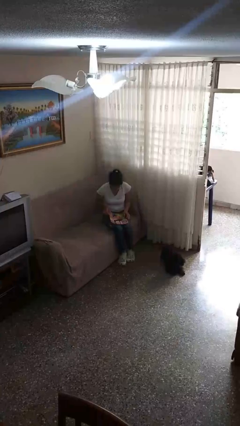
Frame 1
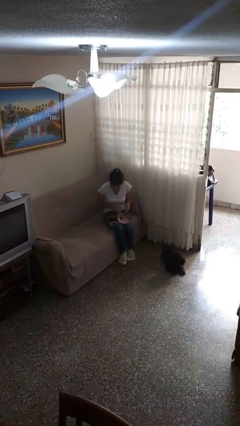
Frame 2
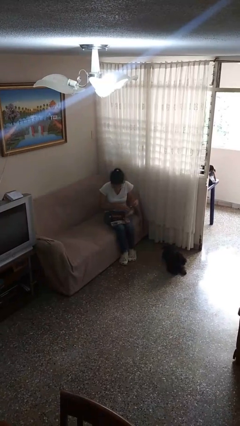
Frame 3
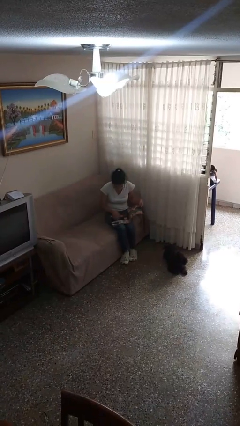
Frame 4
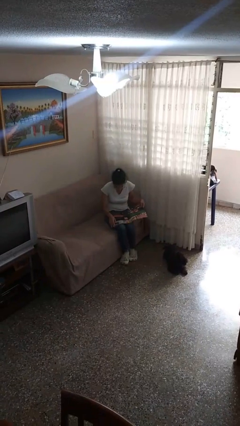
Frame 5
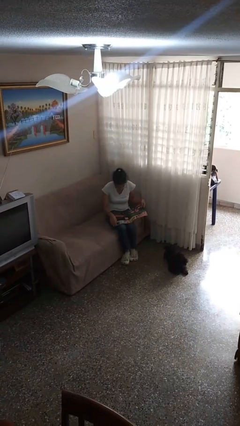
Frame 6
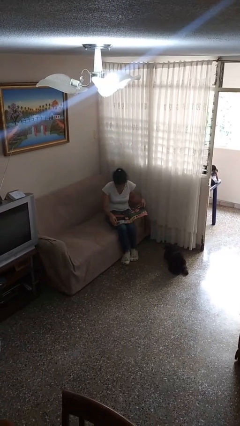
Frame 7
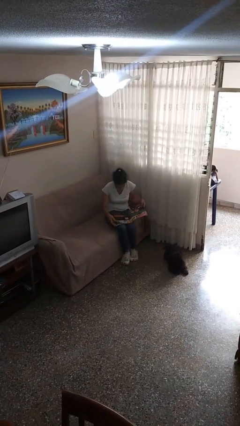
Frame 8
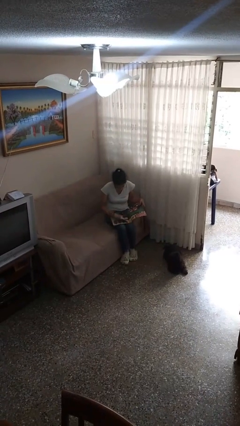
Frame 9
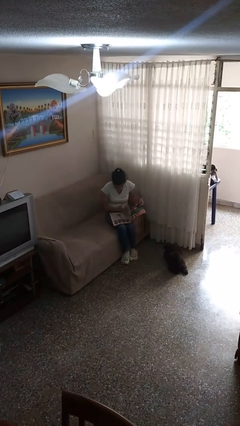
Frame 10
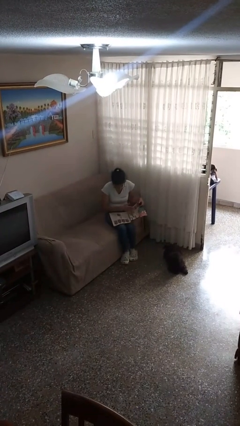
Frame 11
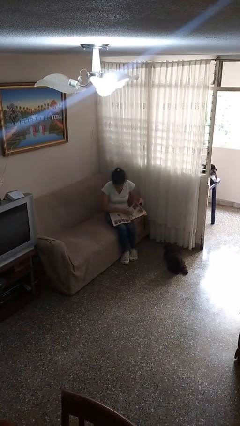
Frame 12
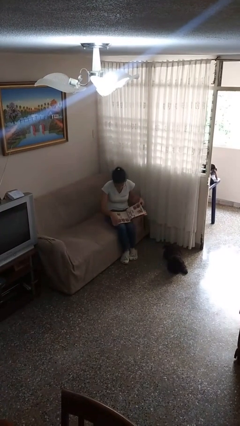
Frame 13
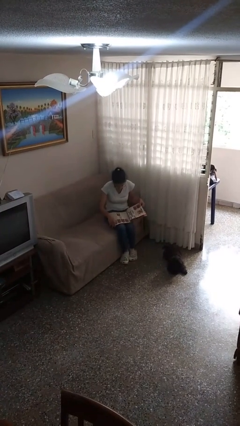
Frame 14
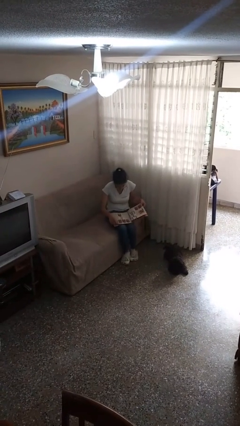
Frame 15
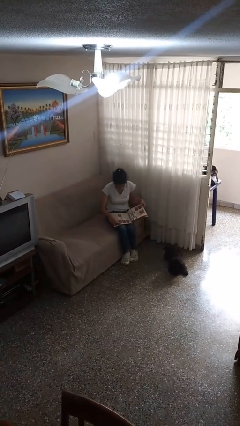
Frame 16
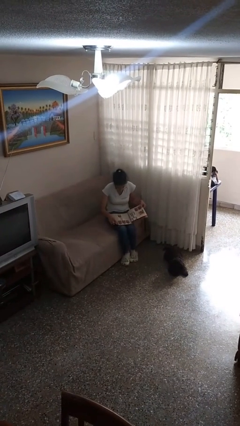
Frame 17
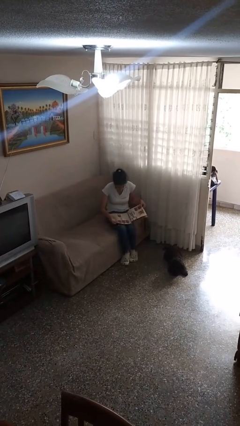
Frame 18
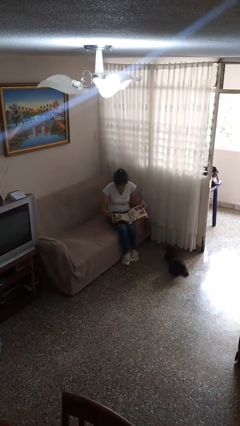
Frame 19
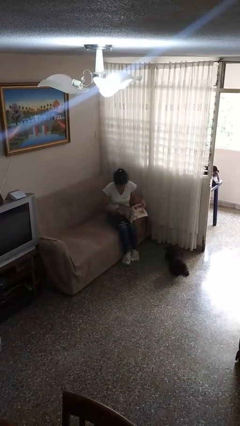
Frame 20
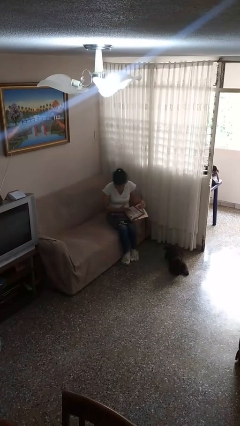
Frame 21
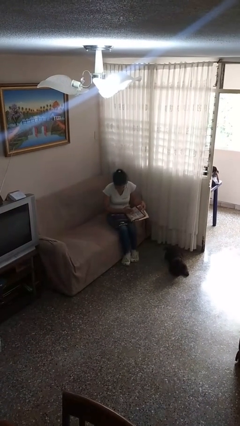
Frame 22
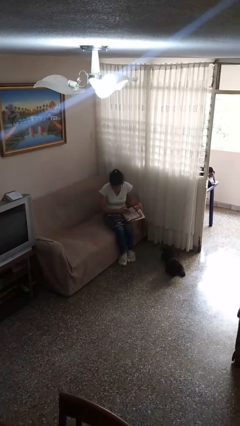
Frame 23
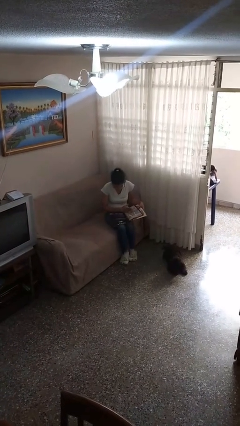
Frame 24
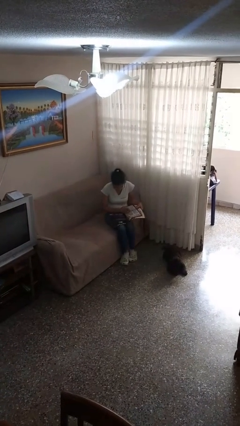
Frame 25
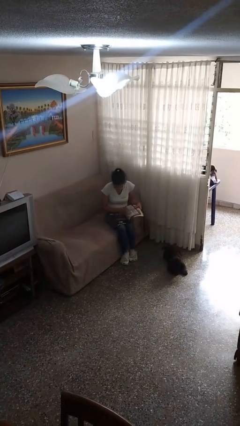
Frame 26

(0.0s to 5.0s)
person reads magazine

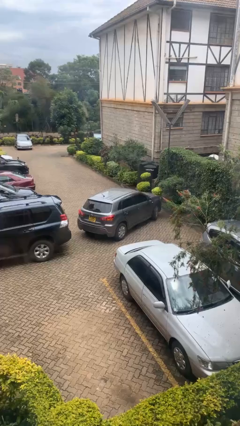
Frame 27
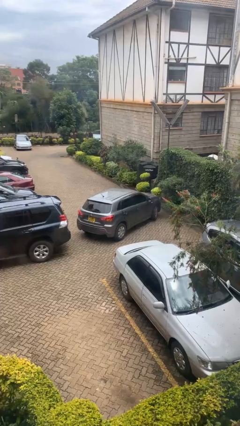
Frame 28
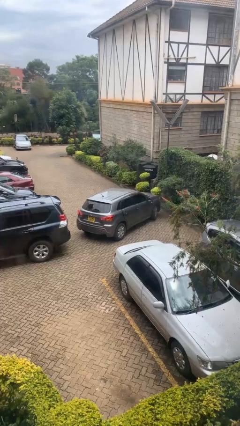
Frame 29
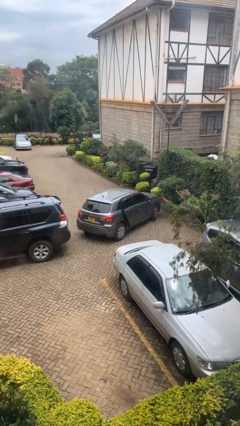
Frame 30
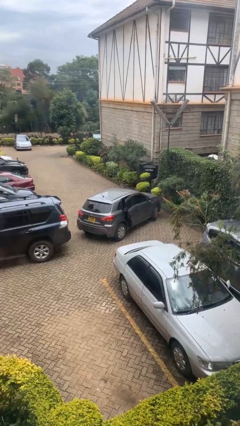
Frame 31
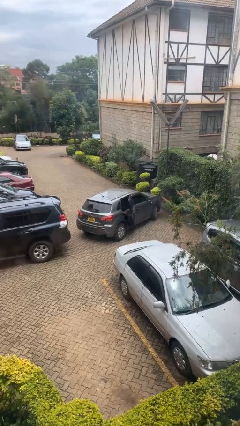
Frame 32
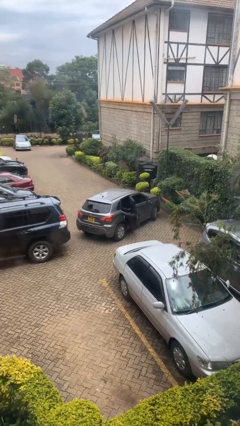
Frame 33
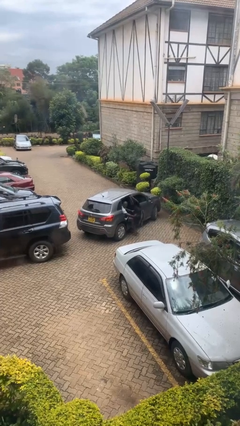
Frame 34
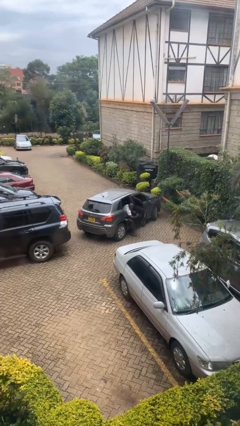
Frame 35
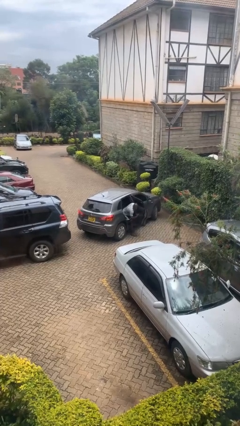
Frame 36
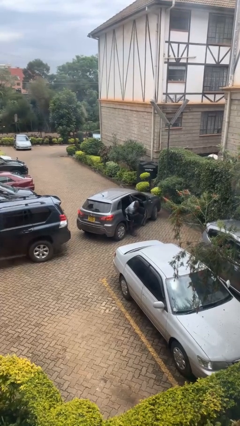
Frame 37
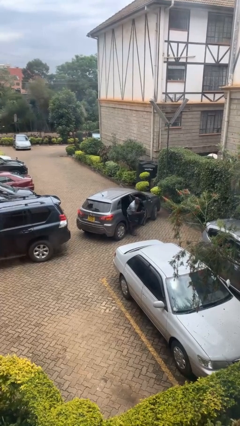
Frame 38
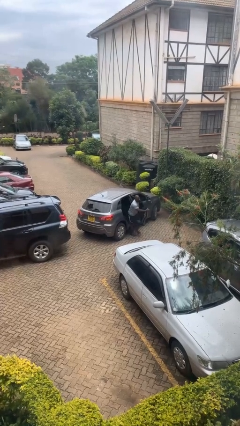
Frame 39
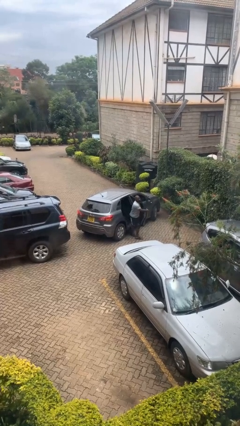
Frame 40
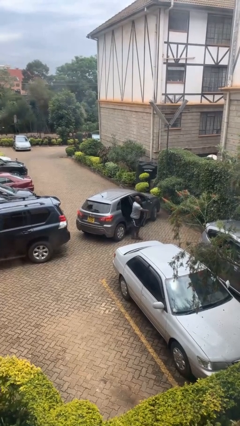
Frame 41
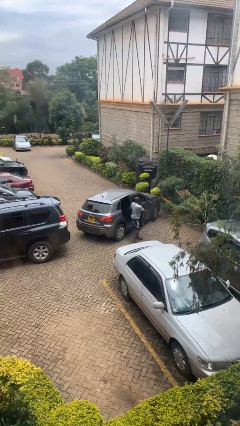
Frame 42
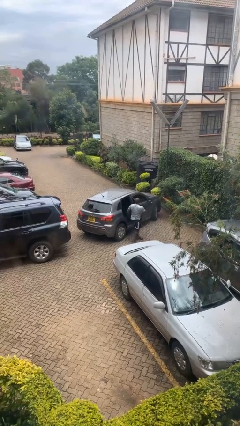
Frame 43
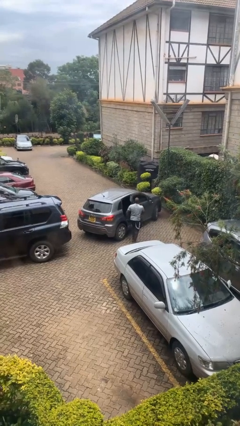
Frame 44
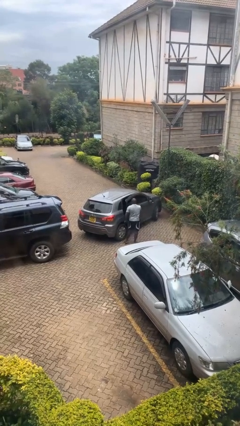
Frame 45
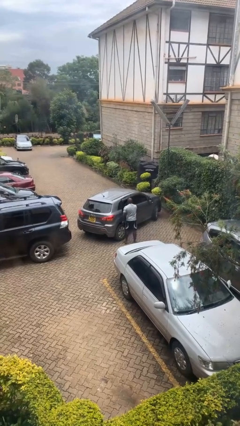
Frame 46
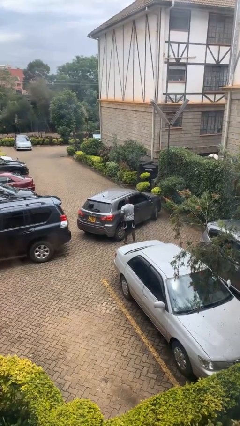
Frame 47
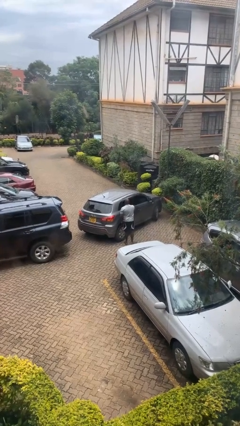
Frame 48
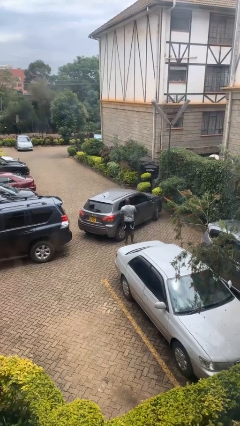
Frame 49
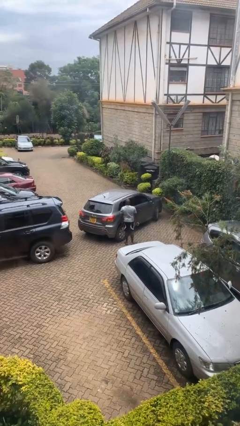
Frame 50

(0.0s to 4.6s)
car drops off person

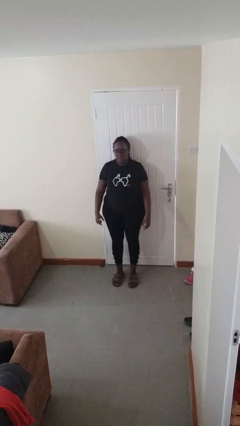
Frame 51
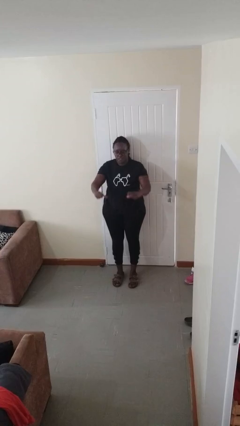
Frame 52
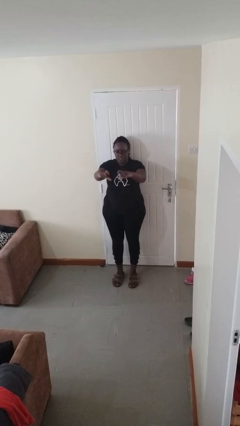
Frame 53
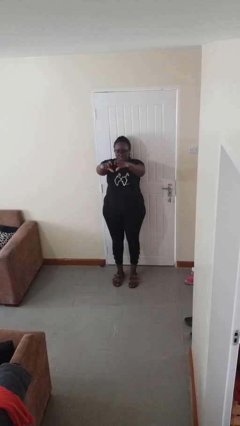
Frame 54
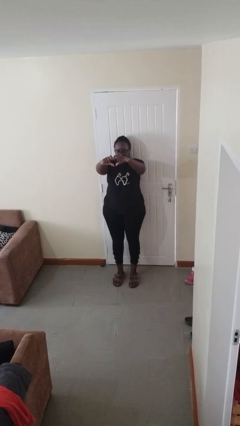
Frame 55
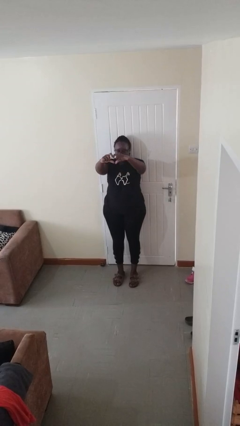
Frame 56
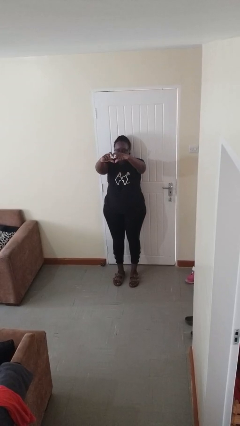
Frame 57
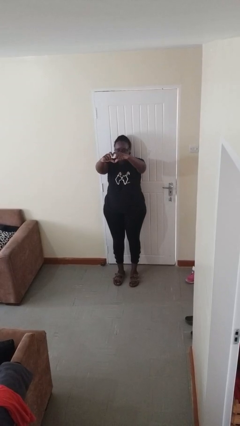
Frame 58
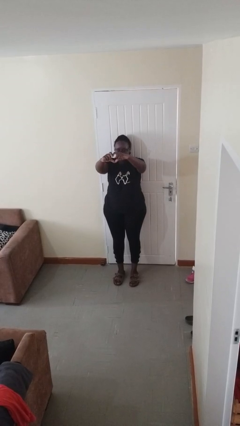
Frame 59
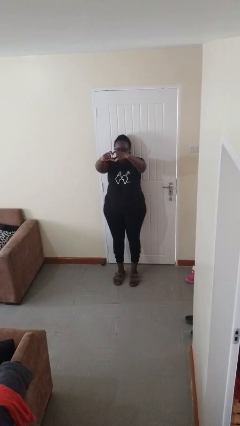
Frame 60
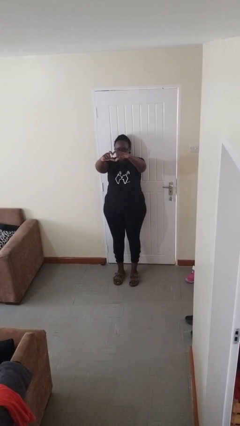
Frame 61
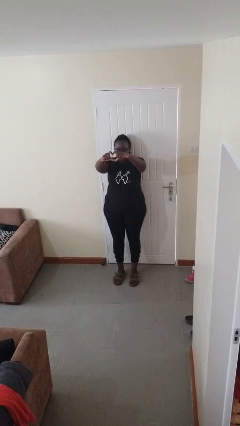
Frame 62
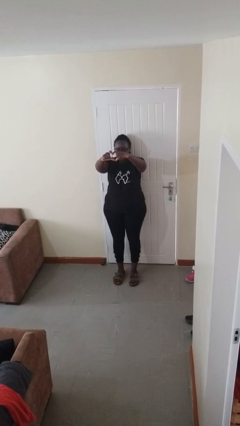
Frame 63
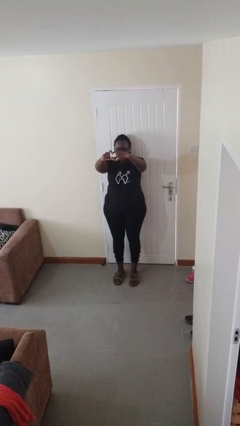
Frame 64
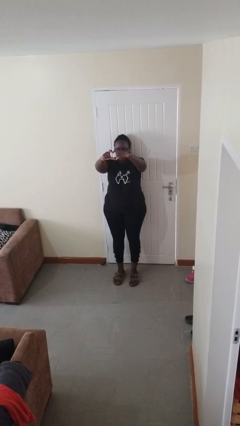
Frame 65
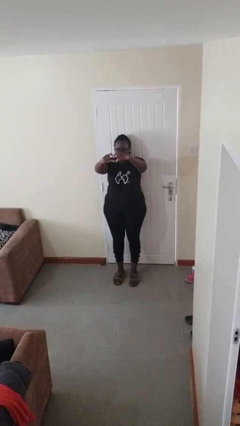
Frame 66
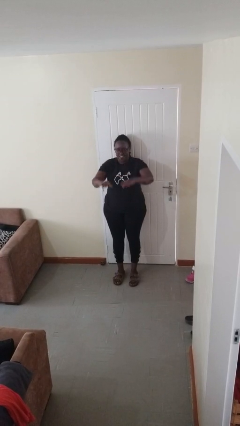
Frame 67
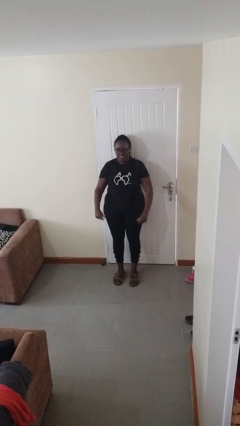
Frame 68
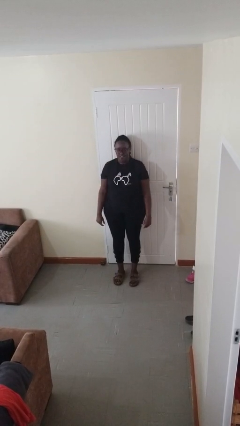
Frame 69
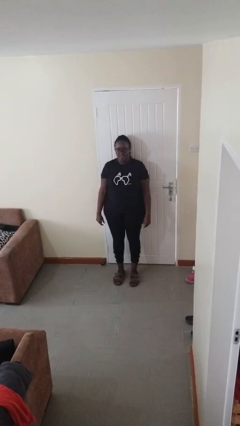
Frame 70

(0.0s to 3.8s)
person gestures heart

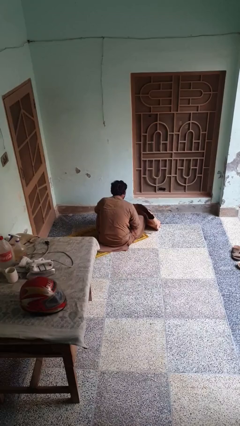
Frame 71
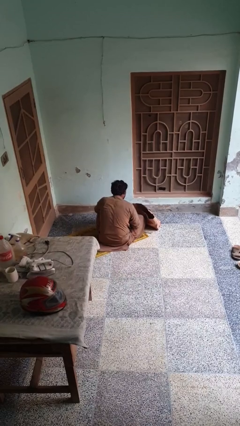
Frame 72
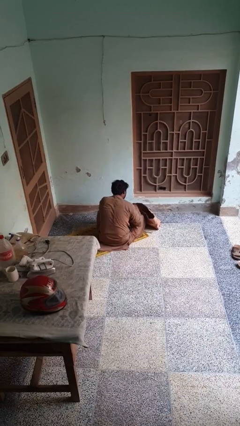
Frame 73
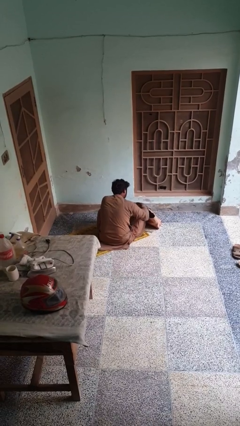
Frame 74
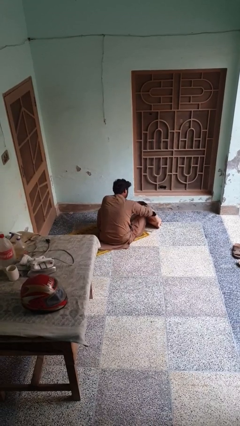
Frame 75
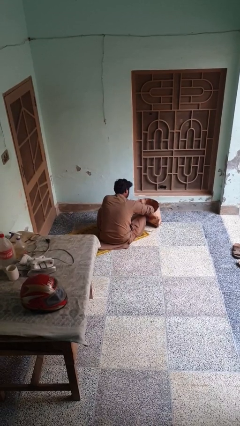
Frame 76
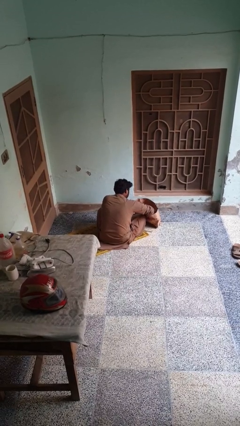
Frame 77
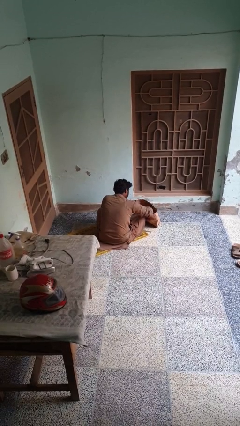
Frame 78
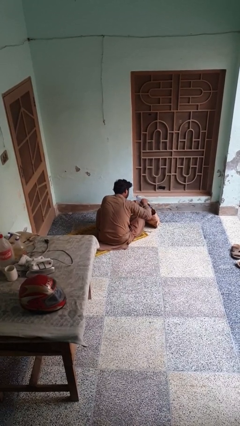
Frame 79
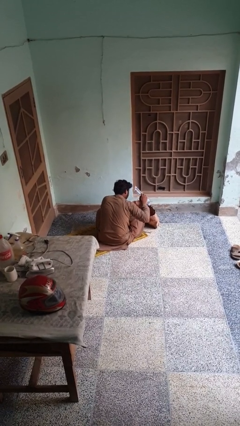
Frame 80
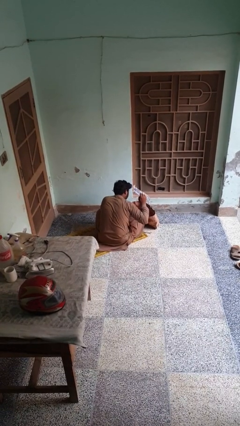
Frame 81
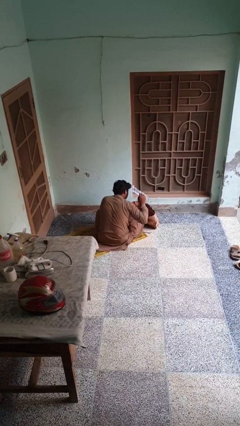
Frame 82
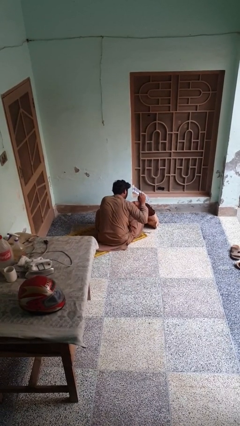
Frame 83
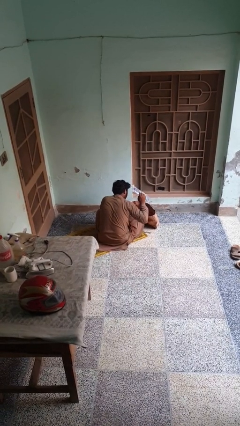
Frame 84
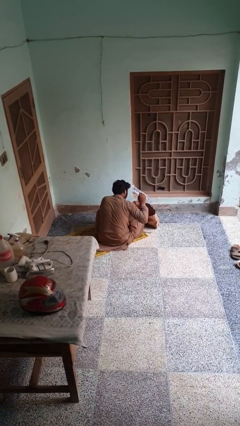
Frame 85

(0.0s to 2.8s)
person searches in bag

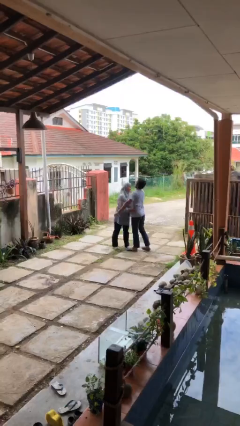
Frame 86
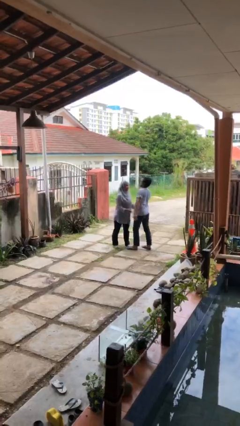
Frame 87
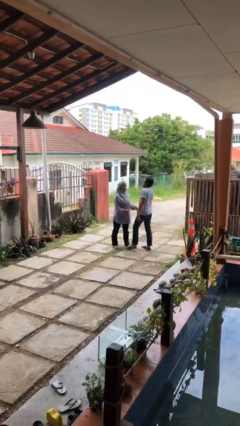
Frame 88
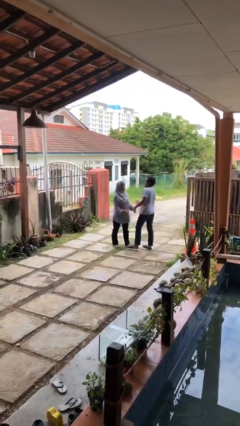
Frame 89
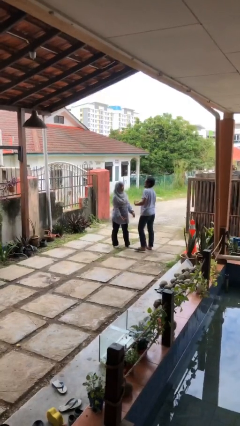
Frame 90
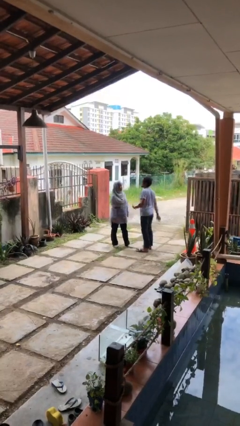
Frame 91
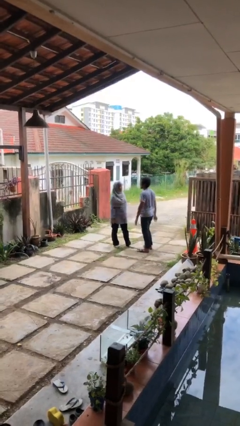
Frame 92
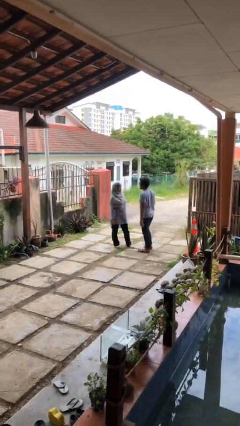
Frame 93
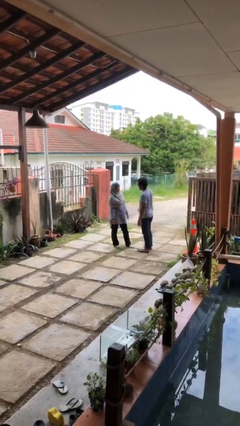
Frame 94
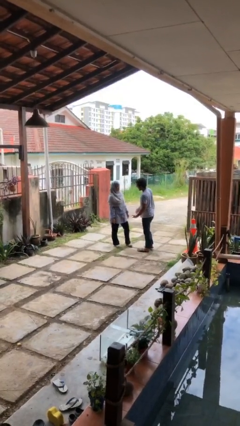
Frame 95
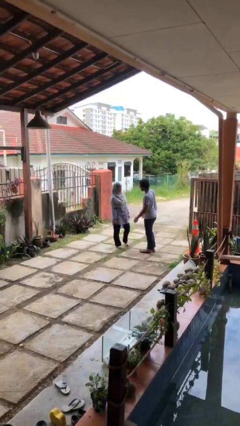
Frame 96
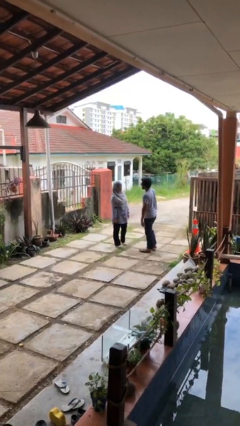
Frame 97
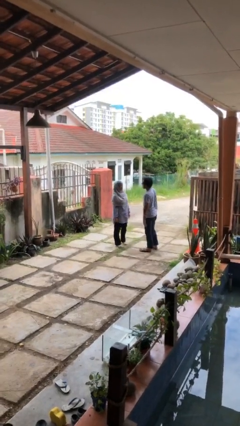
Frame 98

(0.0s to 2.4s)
person talks to person
